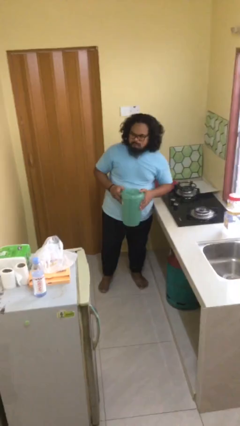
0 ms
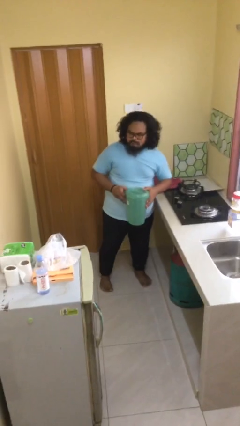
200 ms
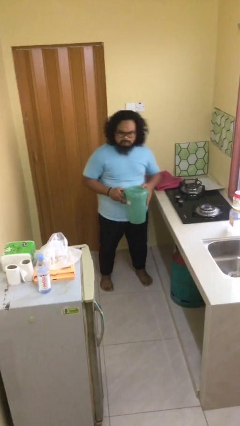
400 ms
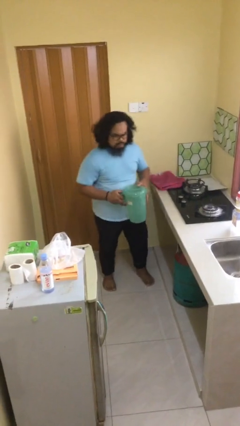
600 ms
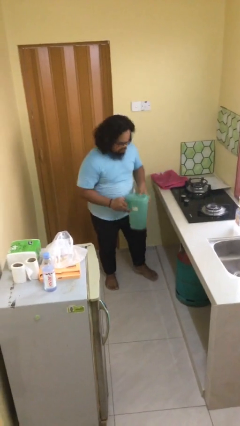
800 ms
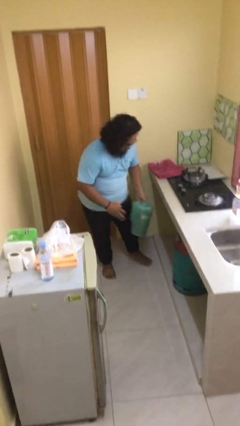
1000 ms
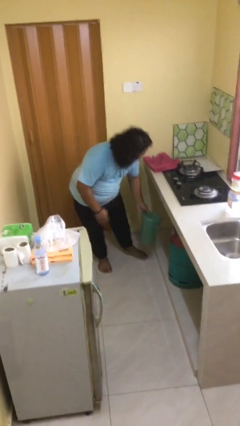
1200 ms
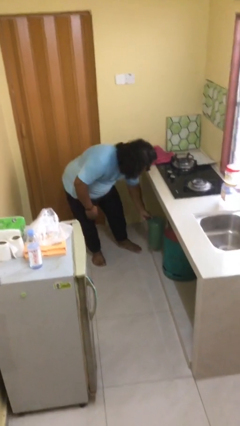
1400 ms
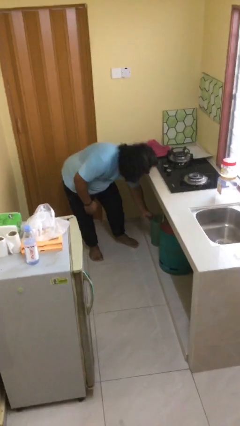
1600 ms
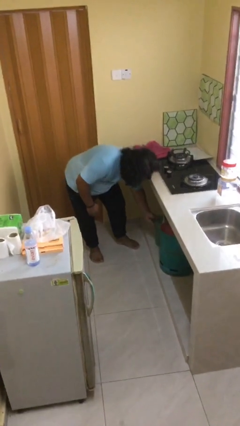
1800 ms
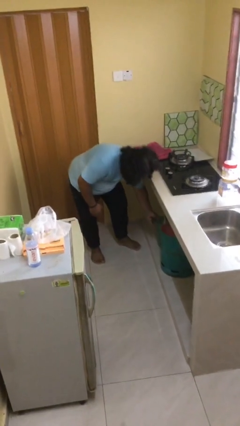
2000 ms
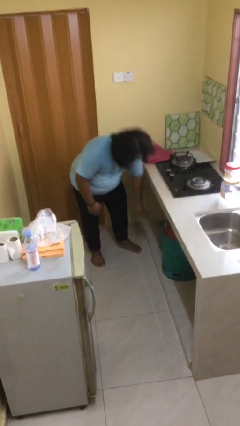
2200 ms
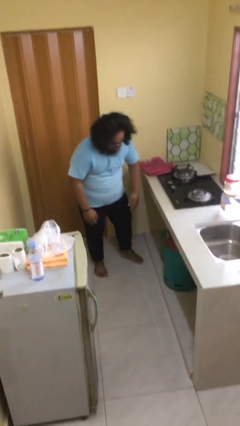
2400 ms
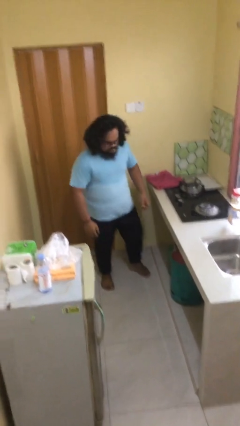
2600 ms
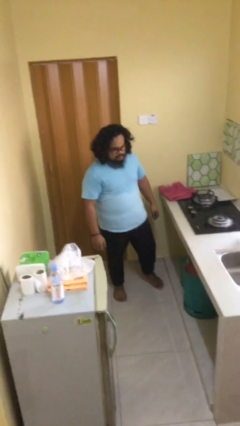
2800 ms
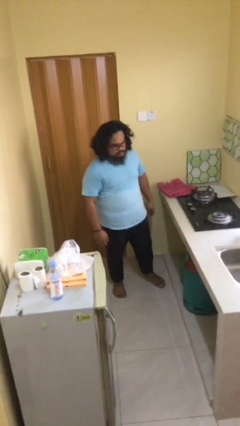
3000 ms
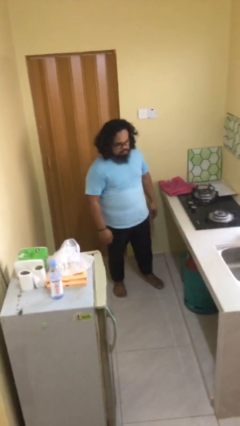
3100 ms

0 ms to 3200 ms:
person puts down object into cabinet

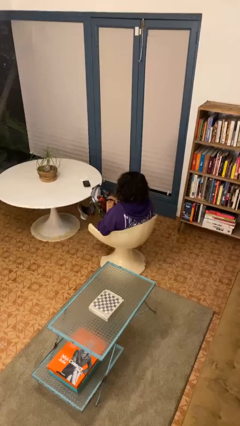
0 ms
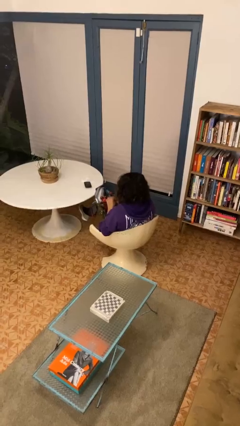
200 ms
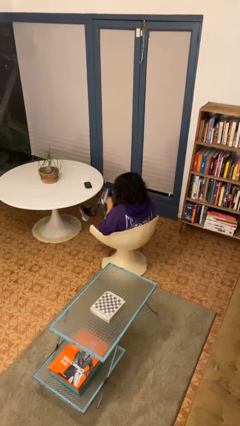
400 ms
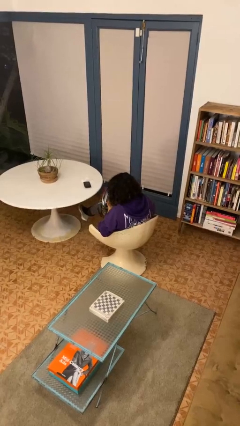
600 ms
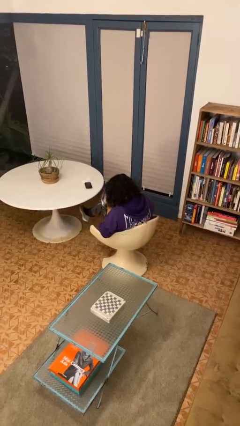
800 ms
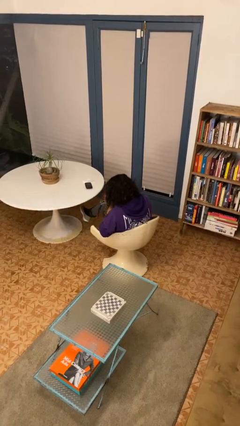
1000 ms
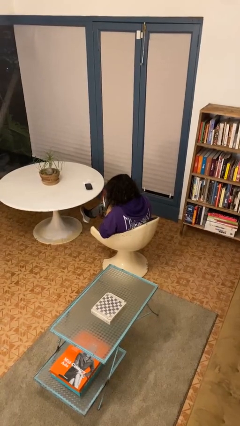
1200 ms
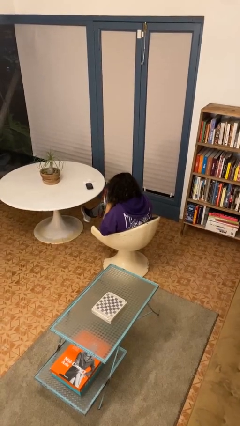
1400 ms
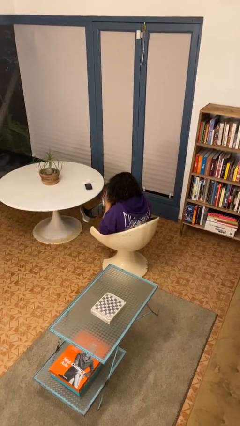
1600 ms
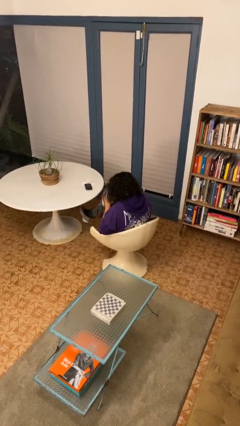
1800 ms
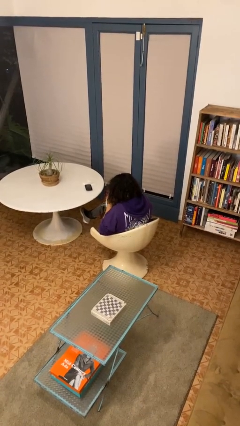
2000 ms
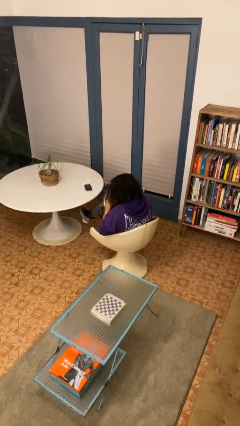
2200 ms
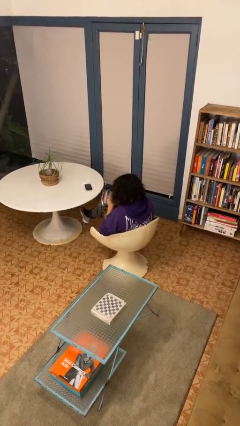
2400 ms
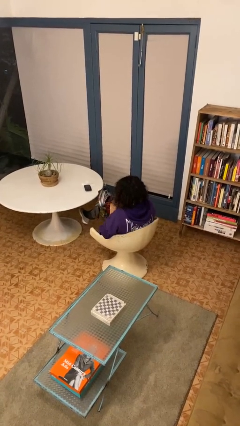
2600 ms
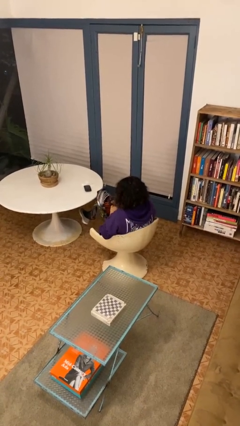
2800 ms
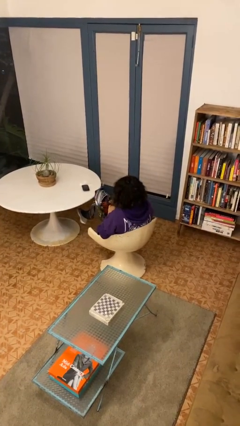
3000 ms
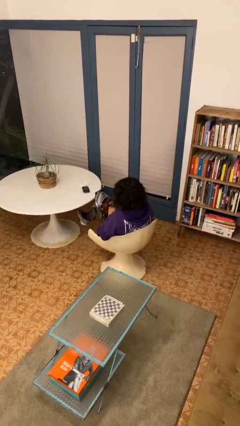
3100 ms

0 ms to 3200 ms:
person searches in bag

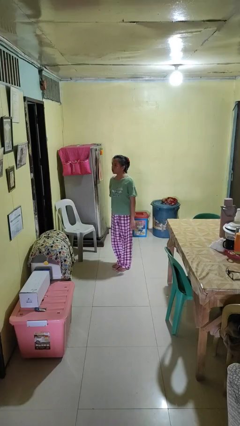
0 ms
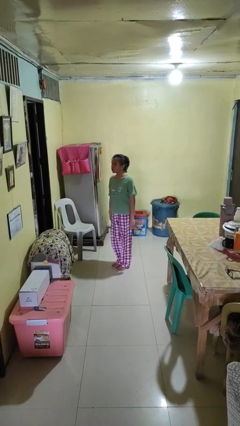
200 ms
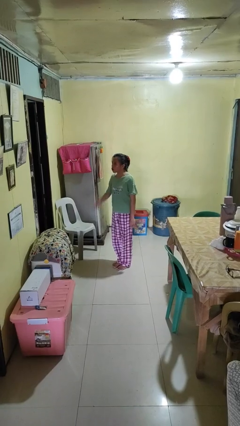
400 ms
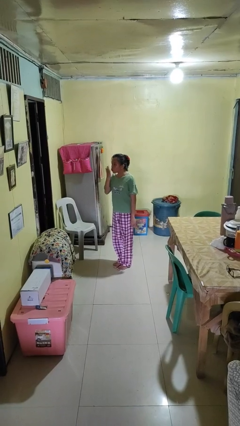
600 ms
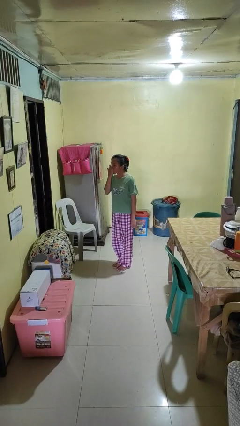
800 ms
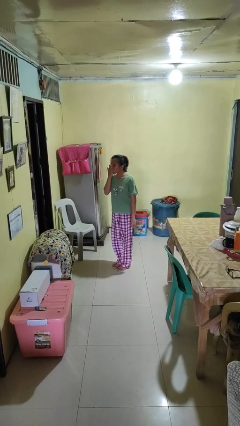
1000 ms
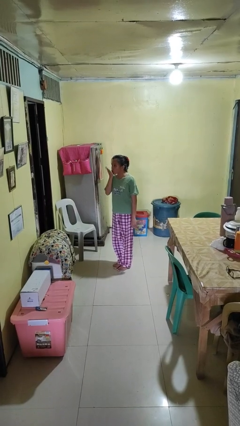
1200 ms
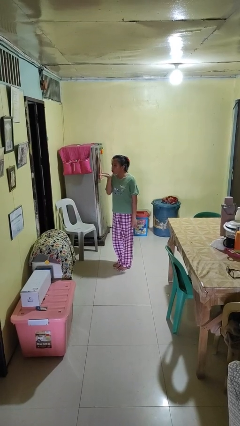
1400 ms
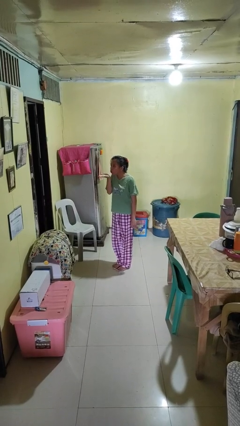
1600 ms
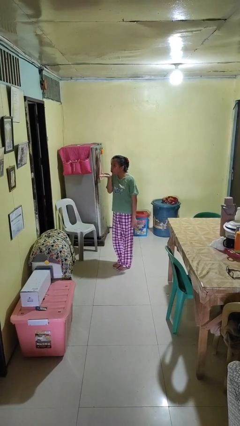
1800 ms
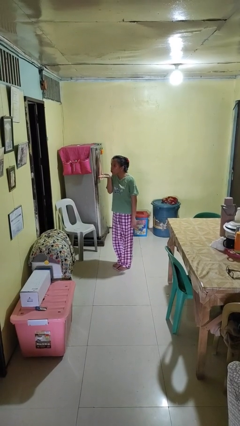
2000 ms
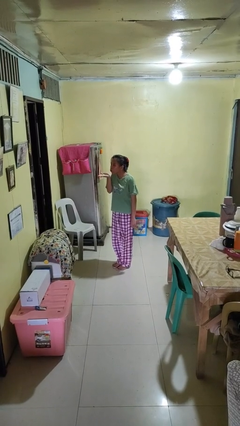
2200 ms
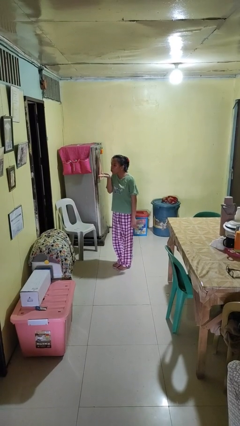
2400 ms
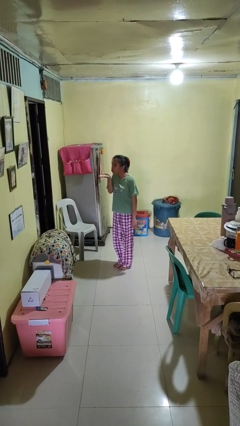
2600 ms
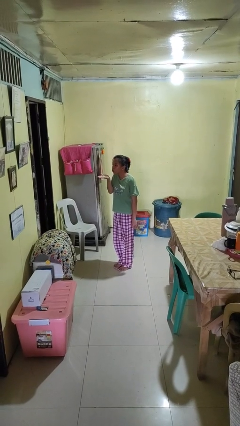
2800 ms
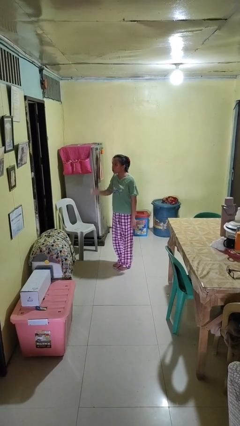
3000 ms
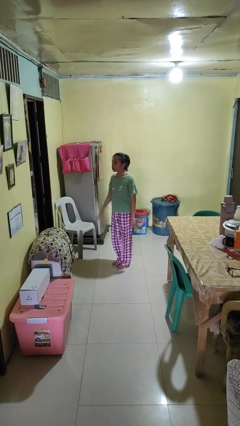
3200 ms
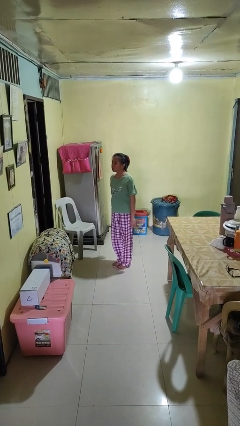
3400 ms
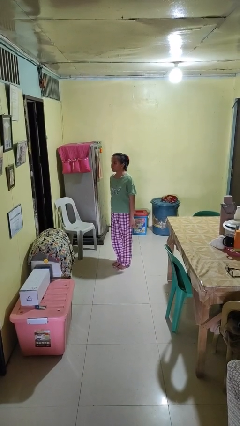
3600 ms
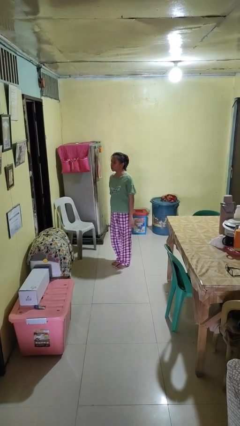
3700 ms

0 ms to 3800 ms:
person gestures blow kiss

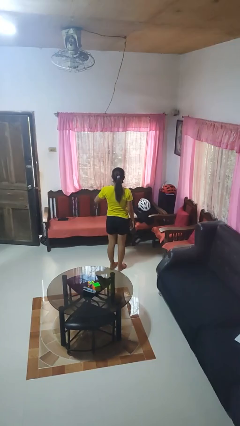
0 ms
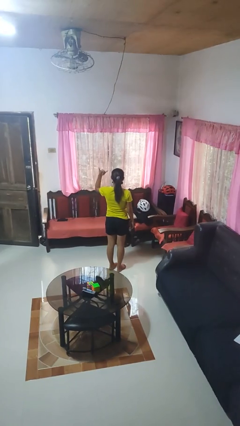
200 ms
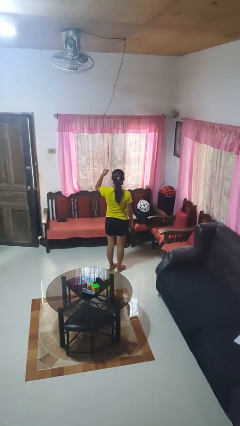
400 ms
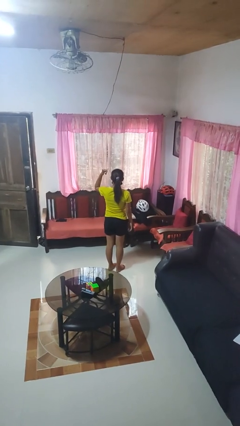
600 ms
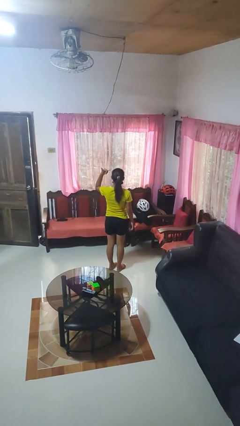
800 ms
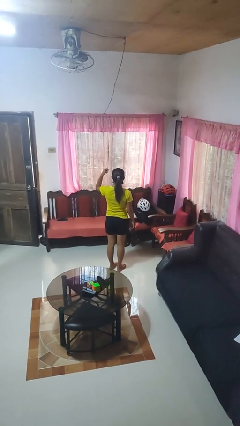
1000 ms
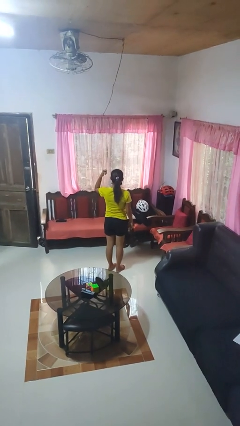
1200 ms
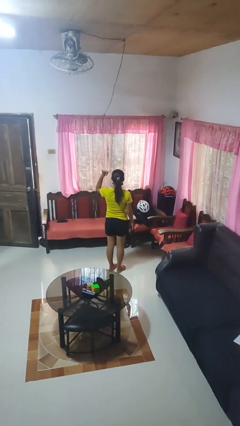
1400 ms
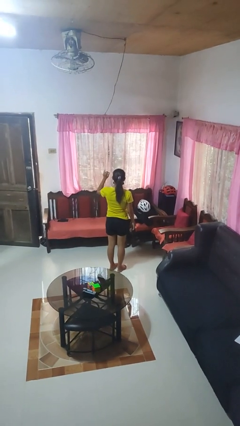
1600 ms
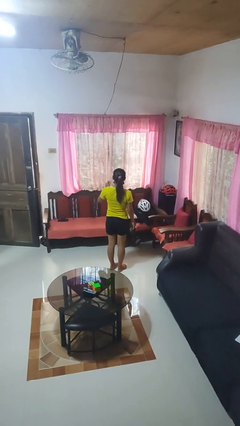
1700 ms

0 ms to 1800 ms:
person gestures hang loose

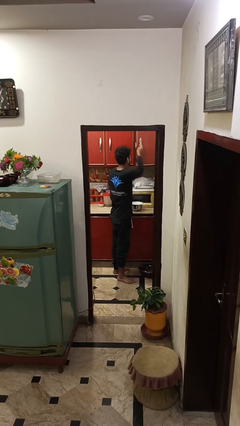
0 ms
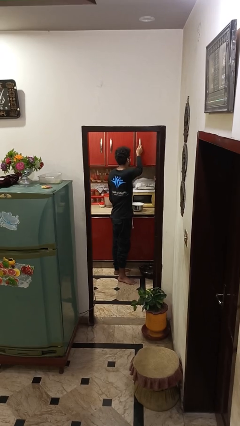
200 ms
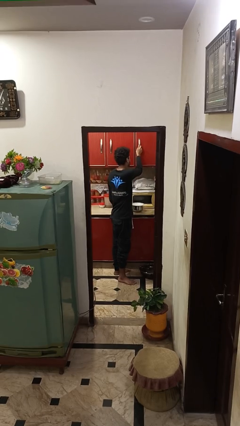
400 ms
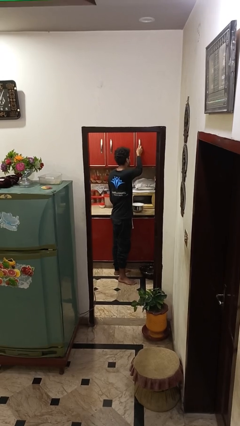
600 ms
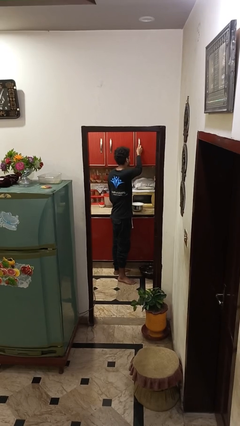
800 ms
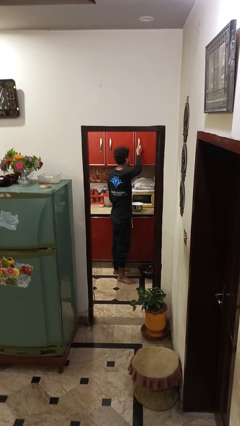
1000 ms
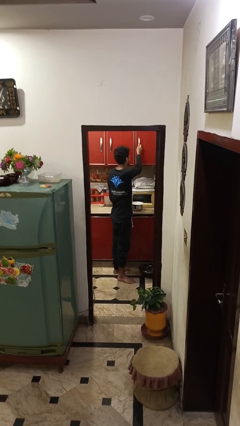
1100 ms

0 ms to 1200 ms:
person closes cabinet

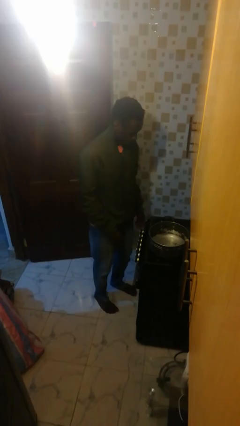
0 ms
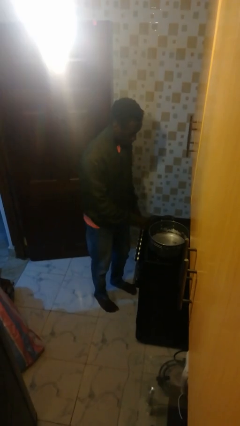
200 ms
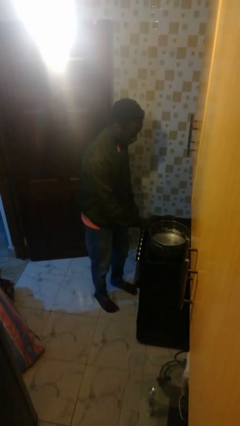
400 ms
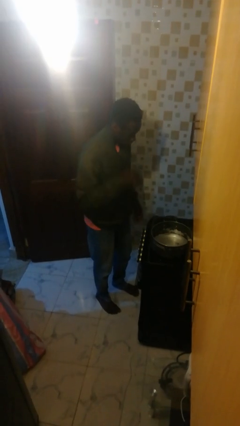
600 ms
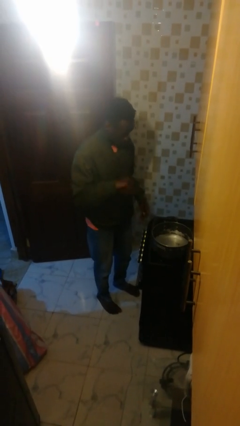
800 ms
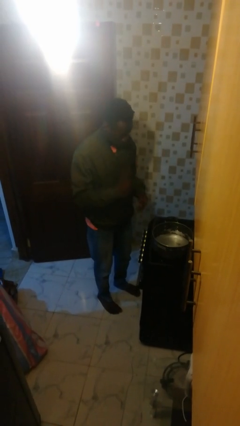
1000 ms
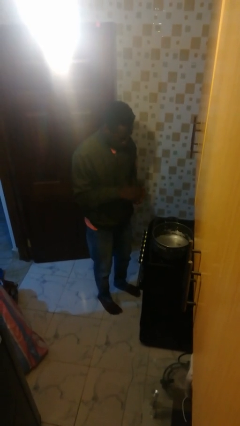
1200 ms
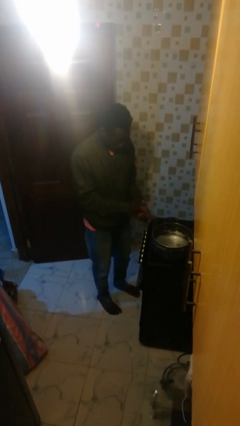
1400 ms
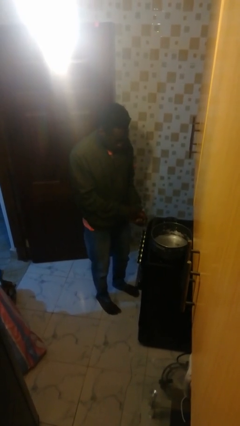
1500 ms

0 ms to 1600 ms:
person burns hand

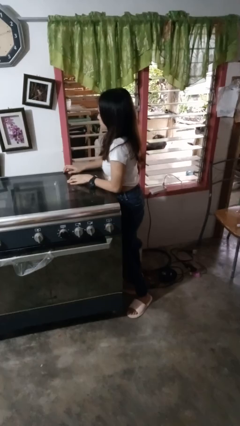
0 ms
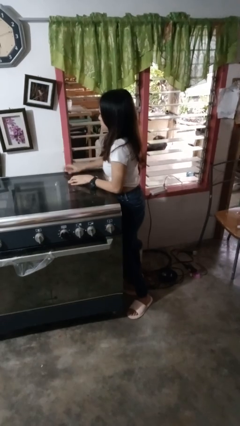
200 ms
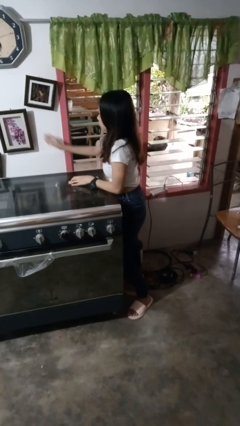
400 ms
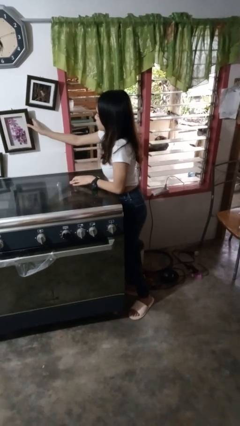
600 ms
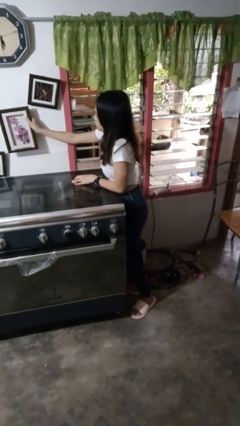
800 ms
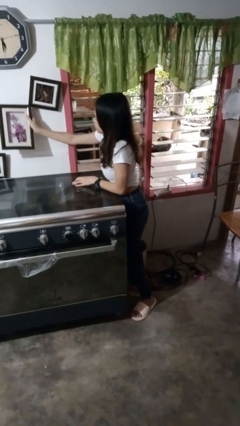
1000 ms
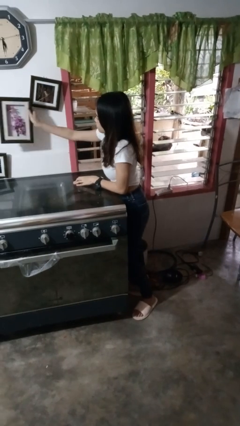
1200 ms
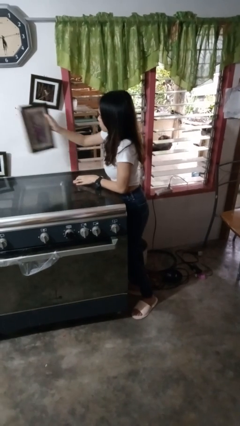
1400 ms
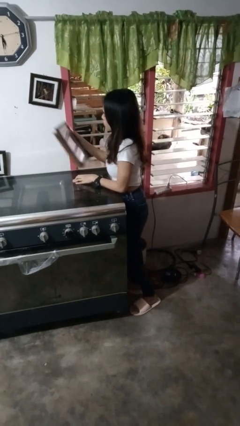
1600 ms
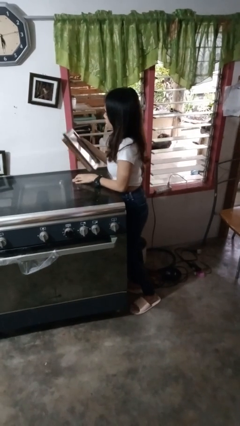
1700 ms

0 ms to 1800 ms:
person takes down picture frame

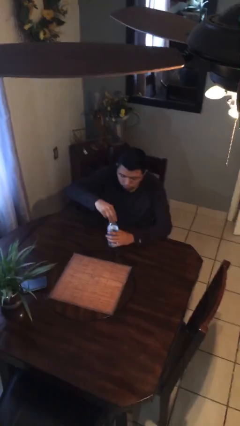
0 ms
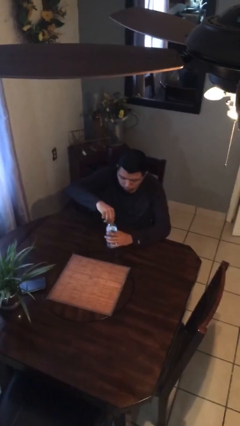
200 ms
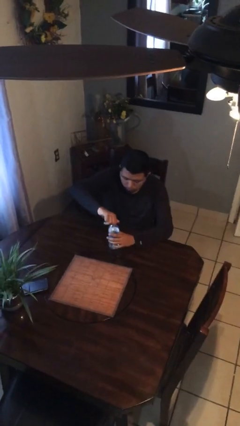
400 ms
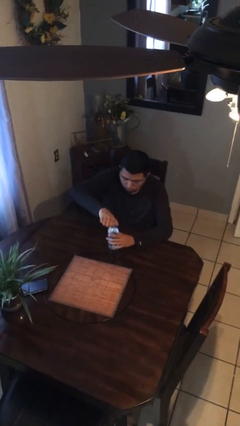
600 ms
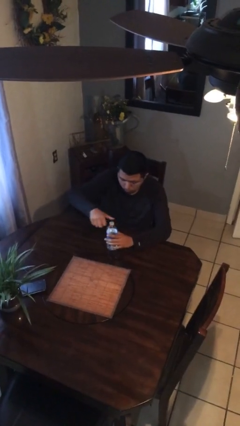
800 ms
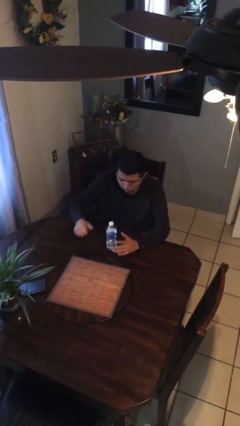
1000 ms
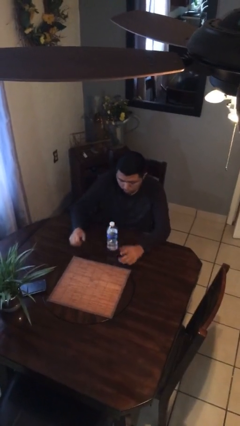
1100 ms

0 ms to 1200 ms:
person screws lid to bottle
